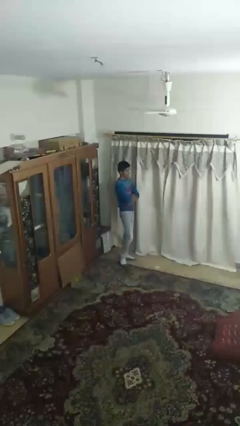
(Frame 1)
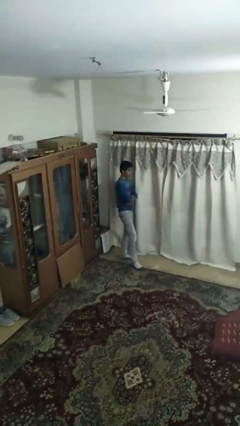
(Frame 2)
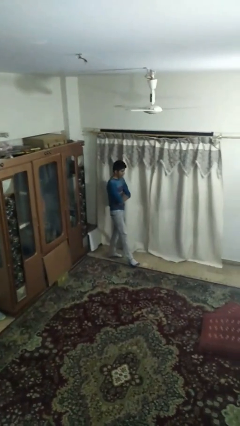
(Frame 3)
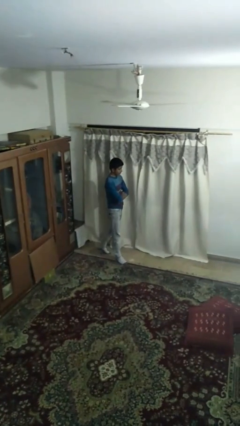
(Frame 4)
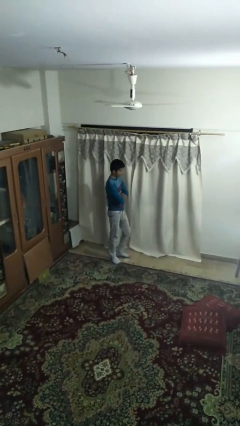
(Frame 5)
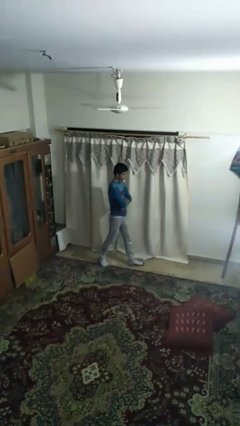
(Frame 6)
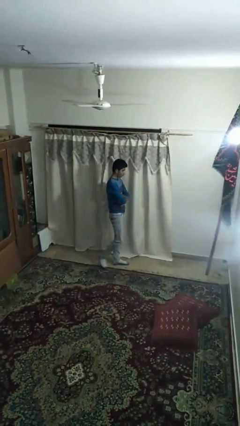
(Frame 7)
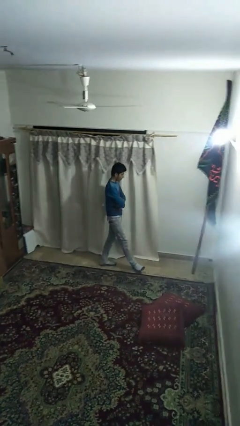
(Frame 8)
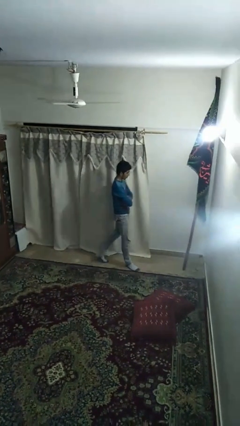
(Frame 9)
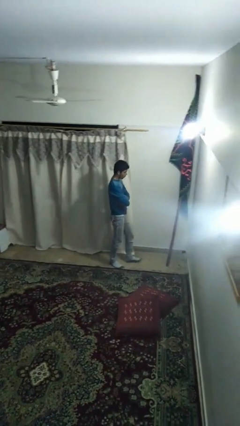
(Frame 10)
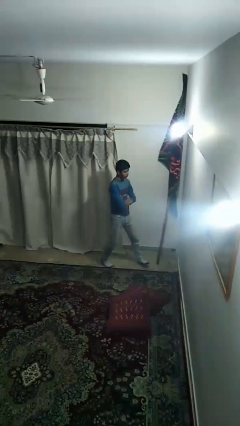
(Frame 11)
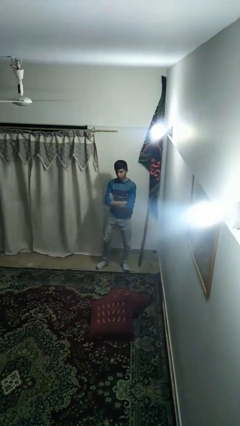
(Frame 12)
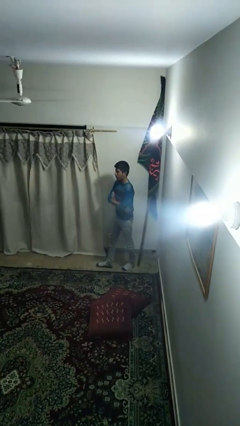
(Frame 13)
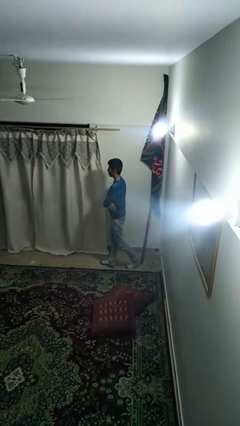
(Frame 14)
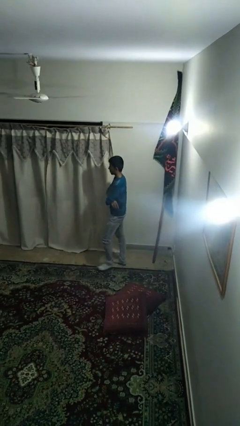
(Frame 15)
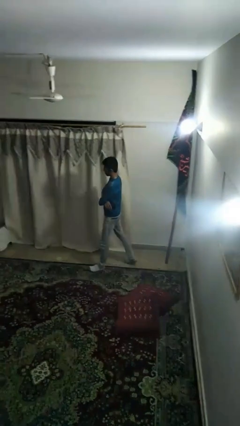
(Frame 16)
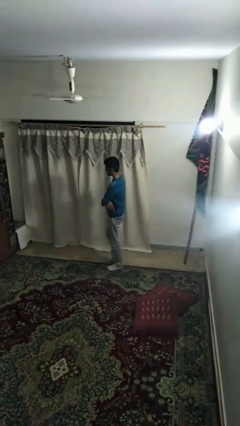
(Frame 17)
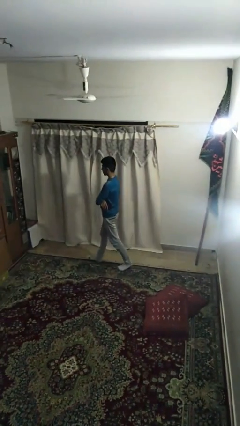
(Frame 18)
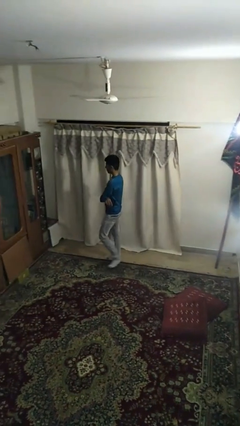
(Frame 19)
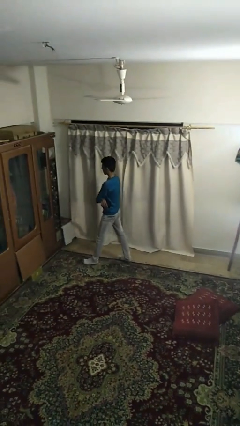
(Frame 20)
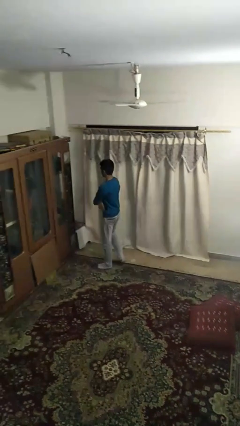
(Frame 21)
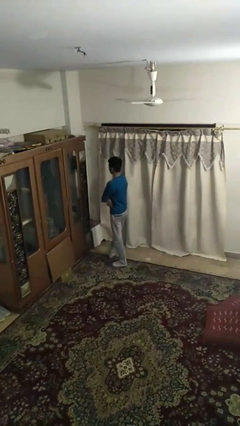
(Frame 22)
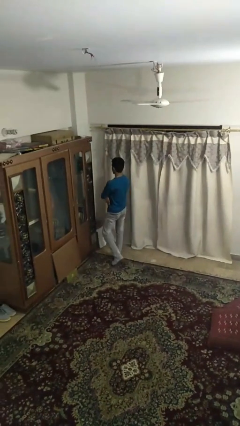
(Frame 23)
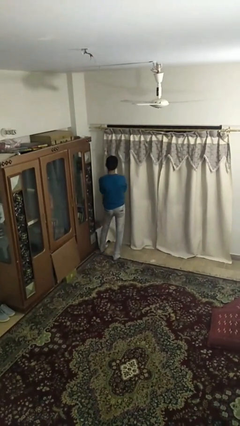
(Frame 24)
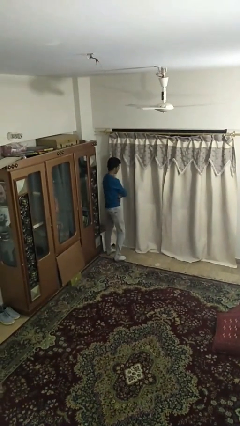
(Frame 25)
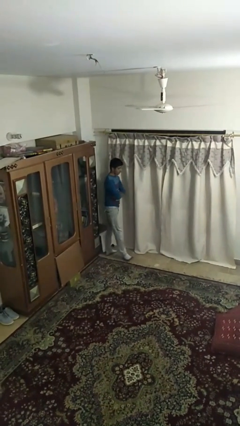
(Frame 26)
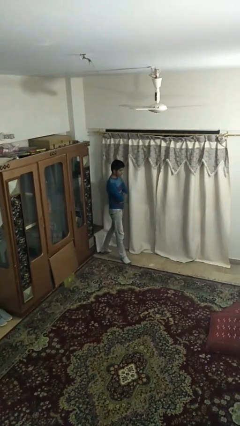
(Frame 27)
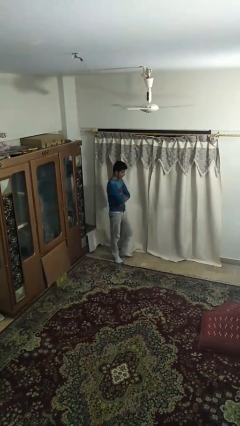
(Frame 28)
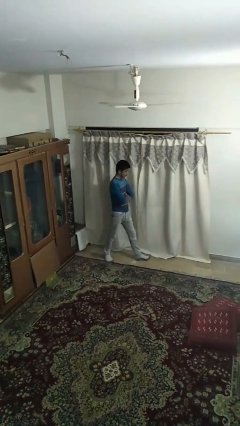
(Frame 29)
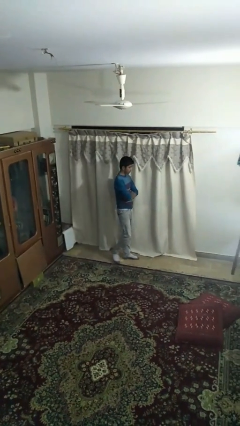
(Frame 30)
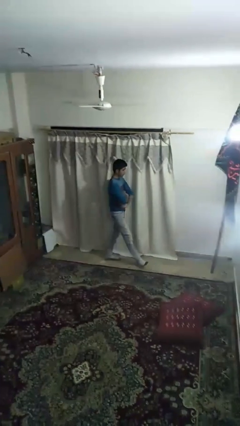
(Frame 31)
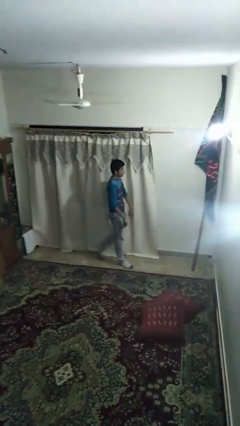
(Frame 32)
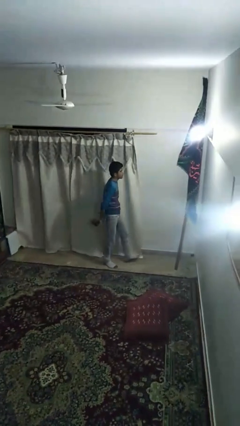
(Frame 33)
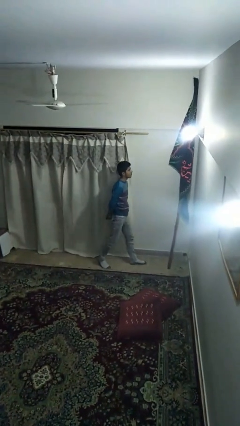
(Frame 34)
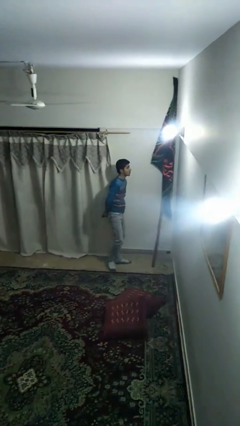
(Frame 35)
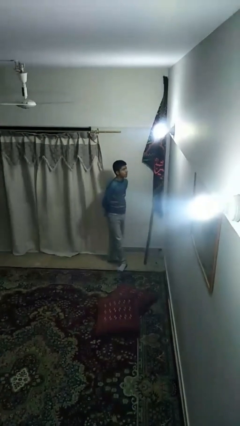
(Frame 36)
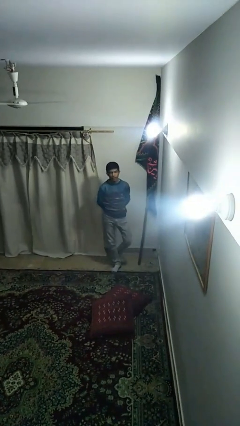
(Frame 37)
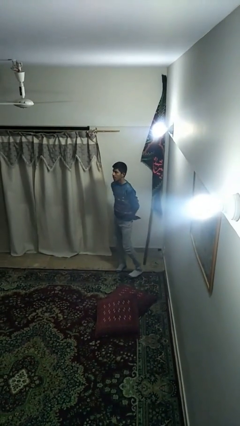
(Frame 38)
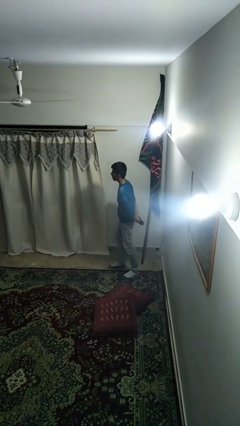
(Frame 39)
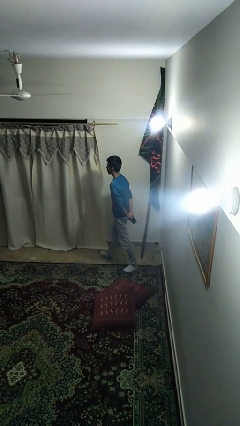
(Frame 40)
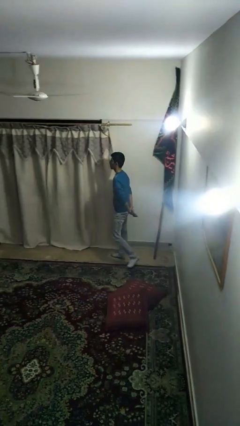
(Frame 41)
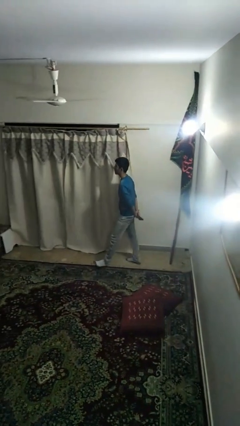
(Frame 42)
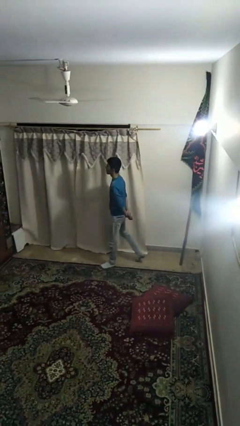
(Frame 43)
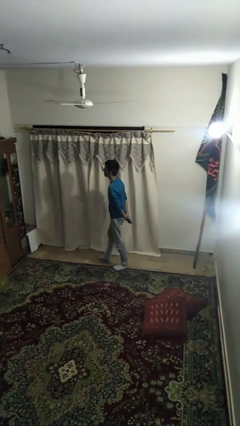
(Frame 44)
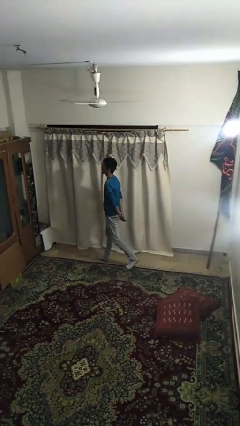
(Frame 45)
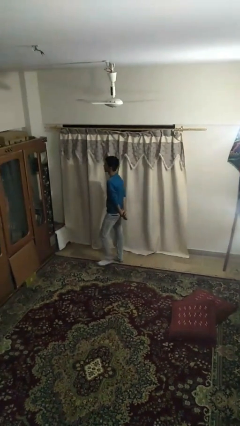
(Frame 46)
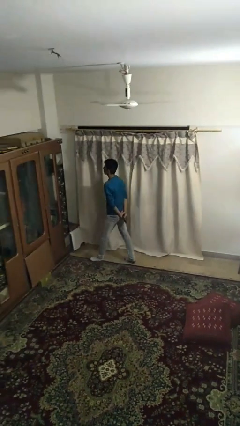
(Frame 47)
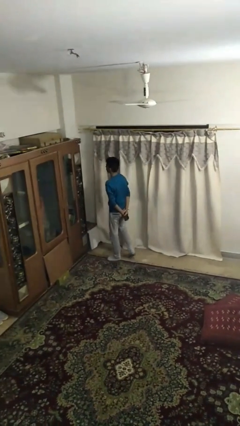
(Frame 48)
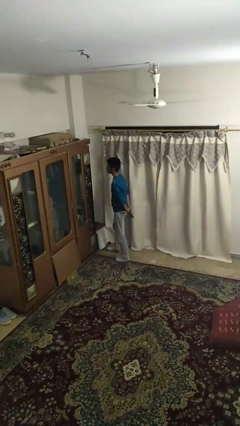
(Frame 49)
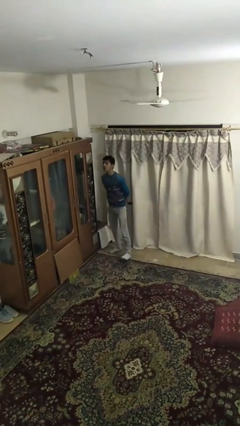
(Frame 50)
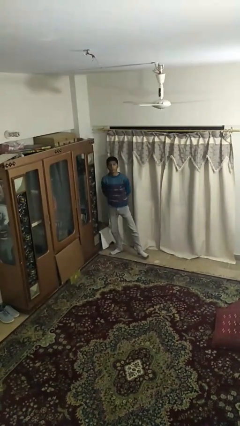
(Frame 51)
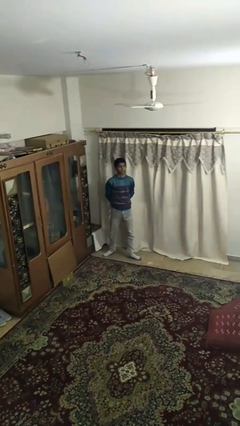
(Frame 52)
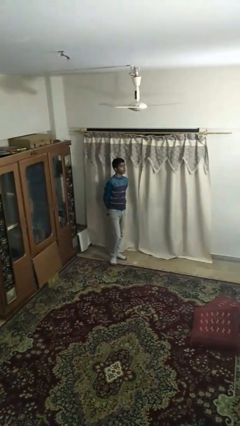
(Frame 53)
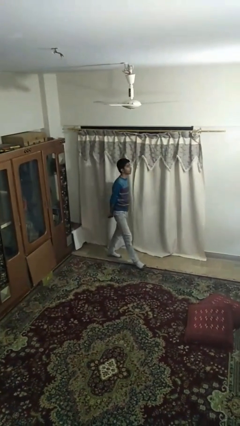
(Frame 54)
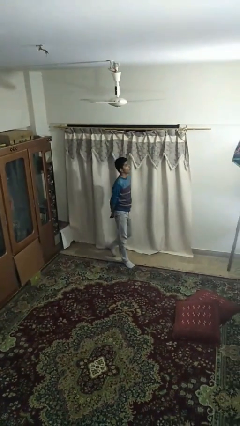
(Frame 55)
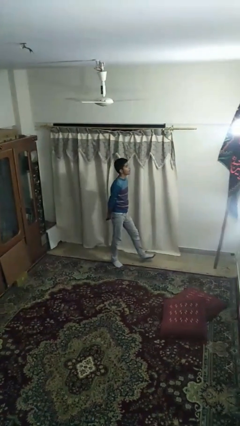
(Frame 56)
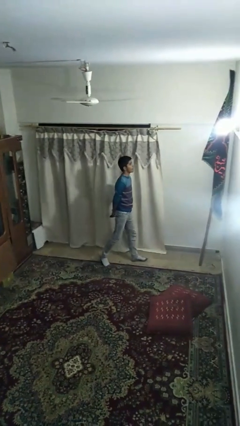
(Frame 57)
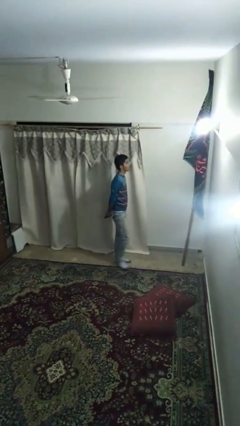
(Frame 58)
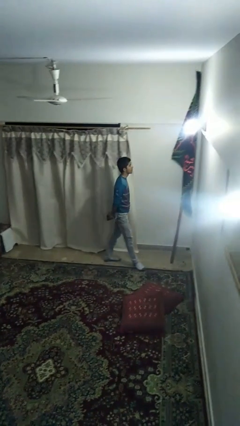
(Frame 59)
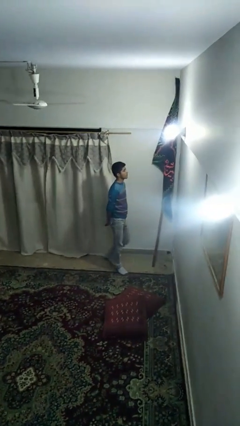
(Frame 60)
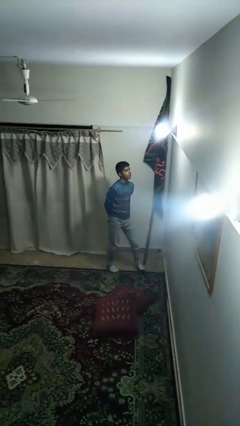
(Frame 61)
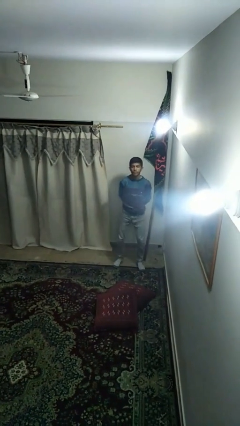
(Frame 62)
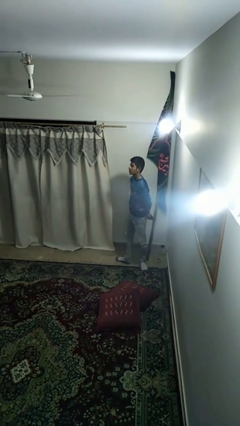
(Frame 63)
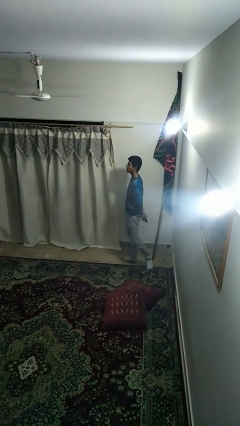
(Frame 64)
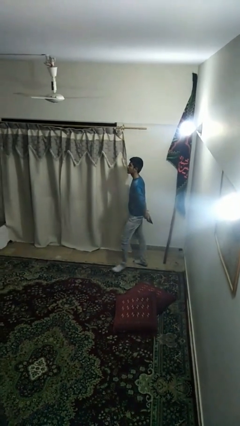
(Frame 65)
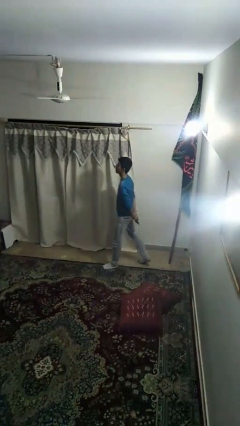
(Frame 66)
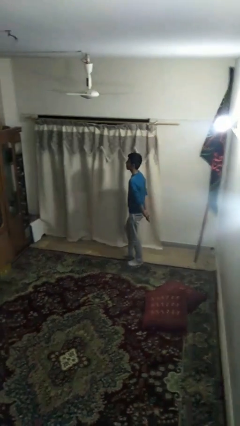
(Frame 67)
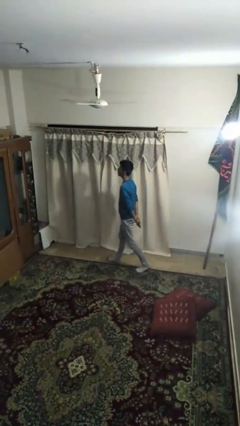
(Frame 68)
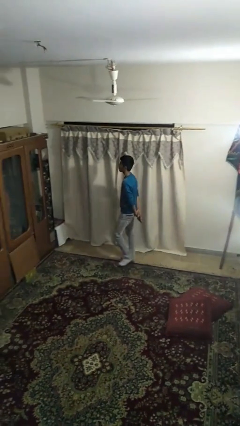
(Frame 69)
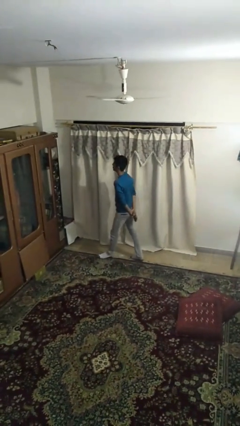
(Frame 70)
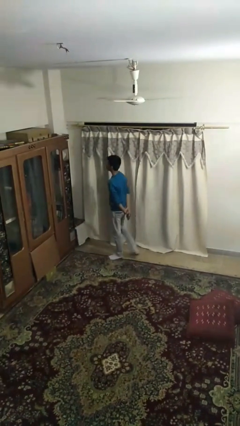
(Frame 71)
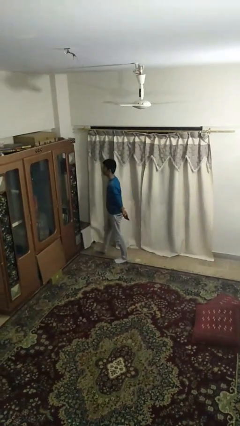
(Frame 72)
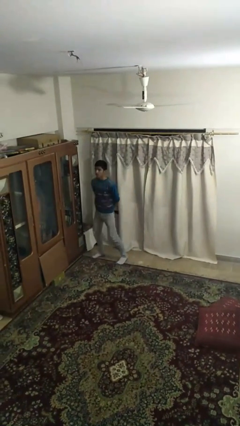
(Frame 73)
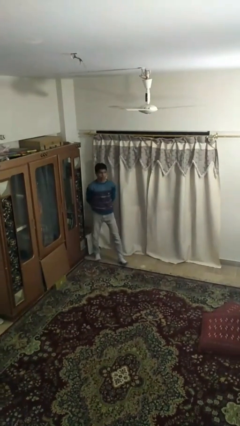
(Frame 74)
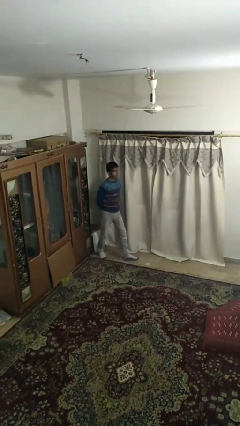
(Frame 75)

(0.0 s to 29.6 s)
person walks

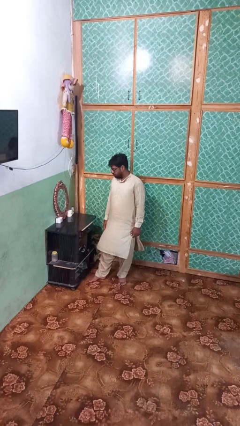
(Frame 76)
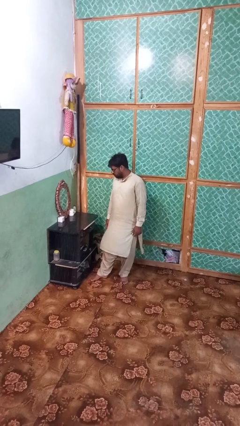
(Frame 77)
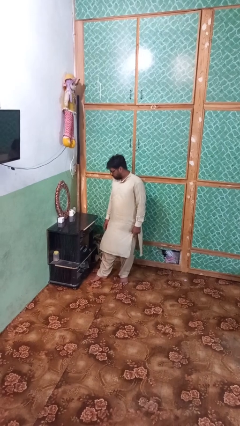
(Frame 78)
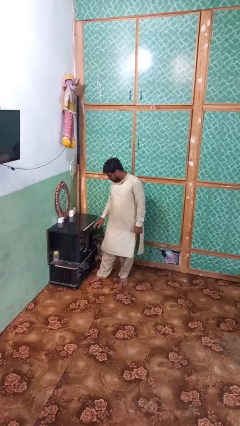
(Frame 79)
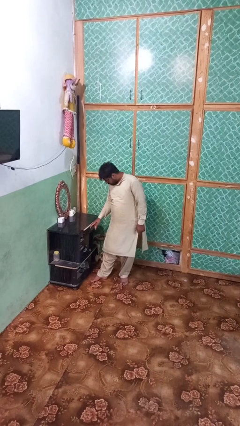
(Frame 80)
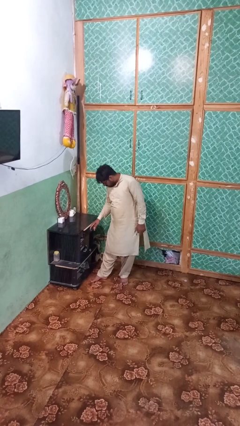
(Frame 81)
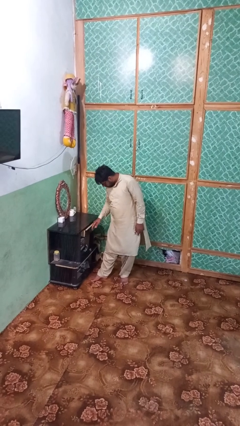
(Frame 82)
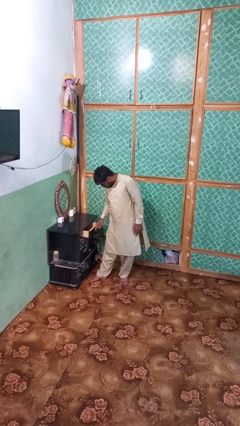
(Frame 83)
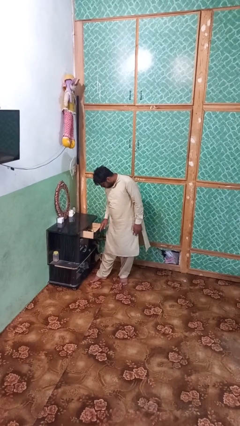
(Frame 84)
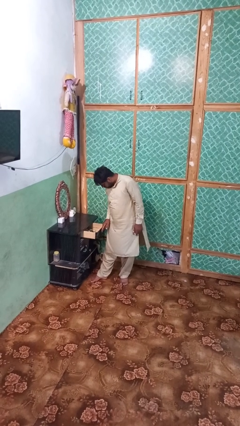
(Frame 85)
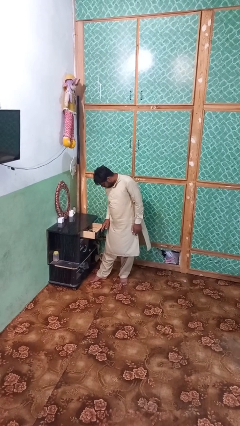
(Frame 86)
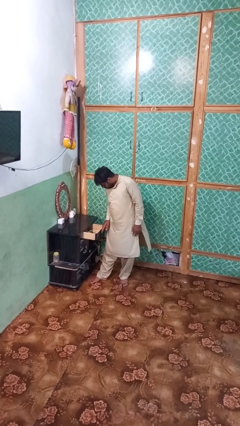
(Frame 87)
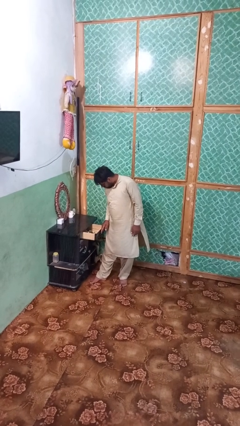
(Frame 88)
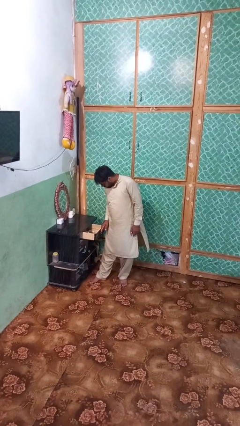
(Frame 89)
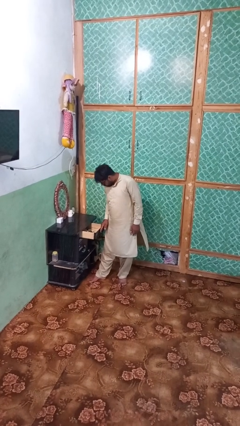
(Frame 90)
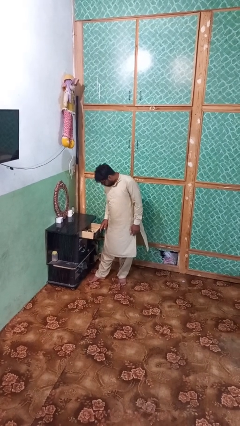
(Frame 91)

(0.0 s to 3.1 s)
person opens dresser drawer
